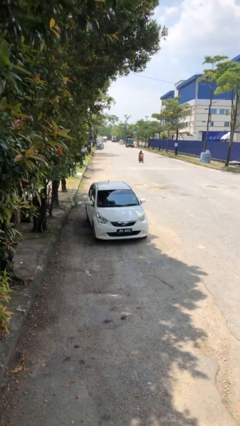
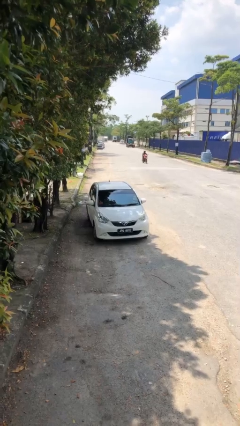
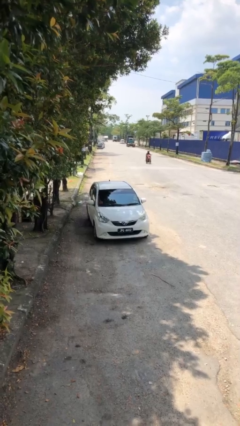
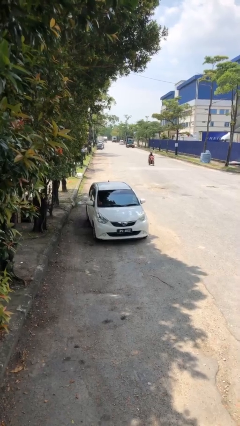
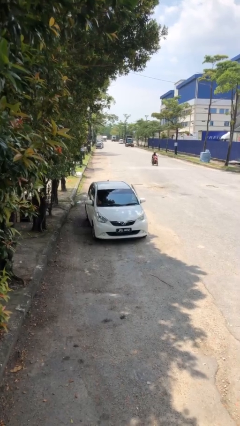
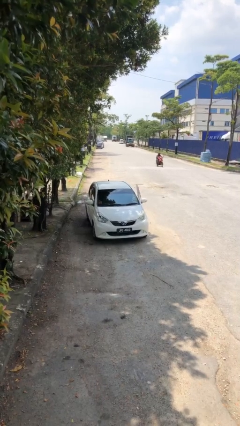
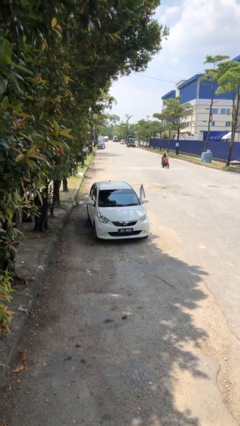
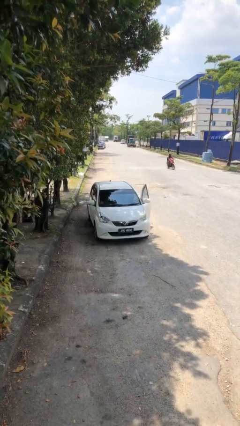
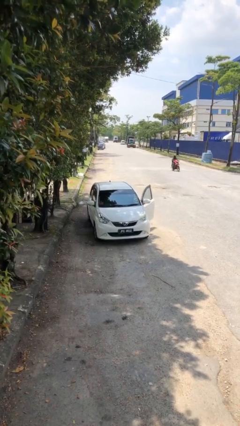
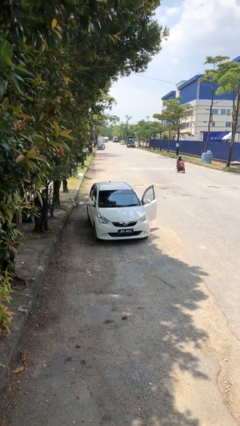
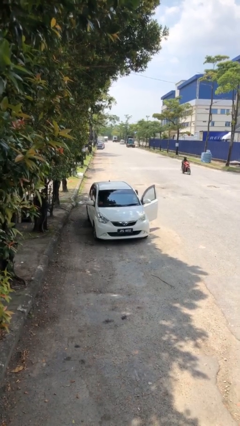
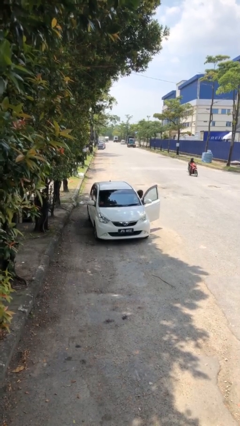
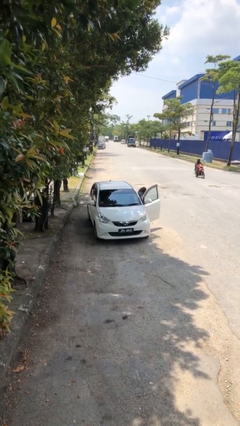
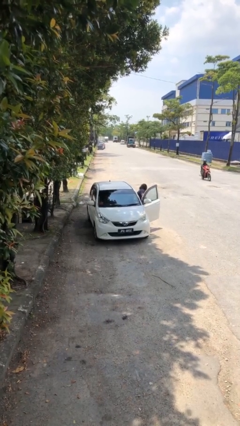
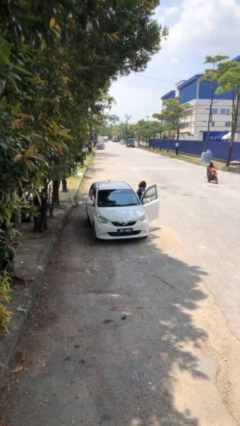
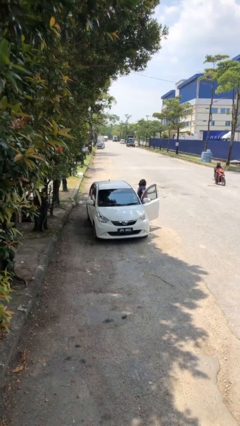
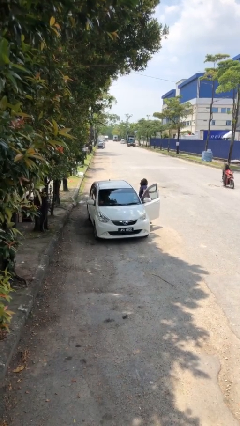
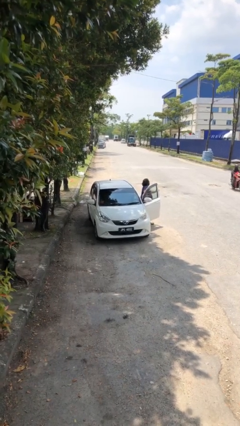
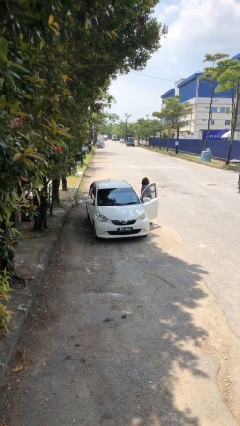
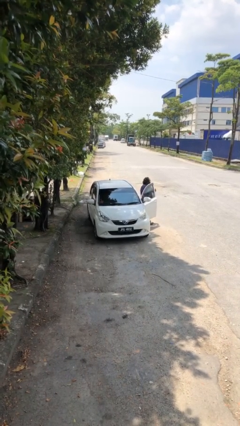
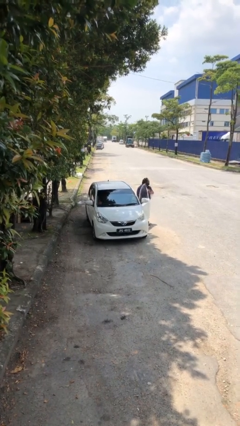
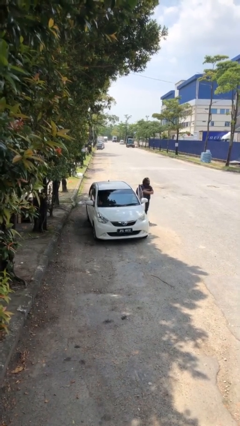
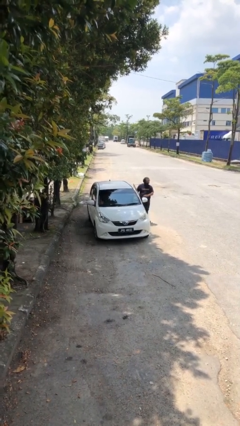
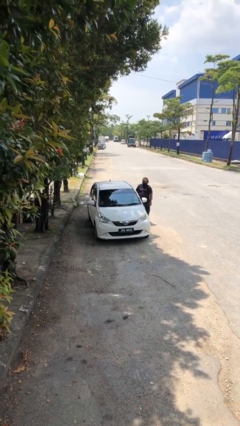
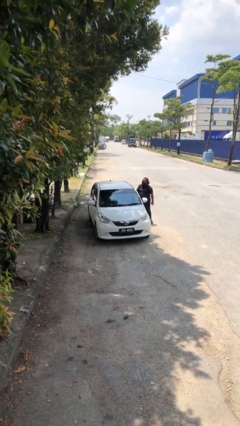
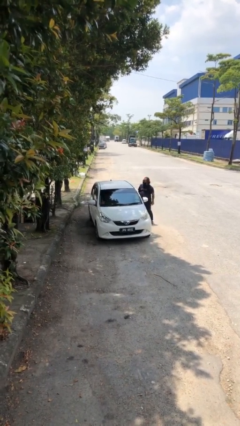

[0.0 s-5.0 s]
car drops off person

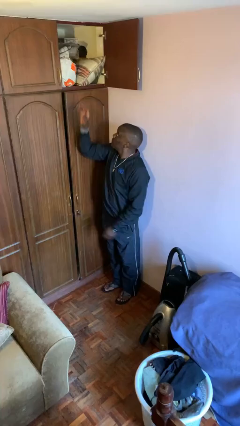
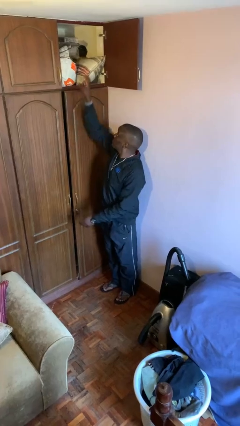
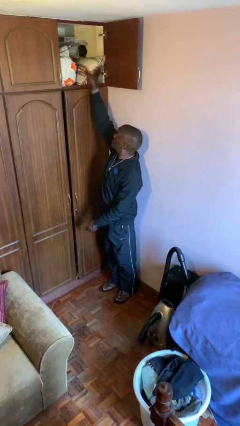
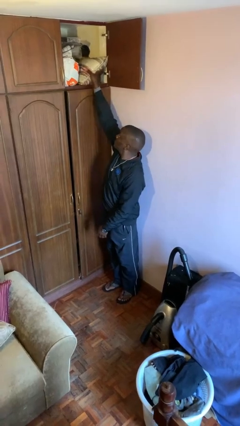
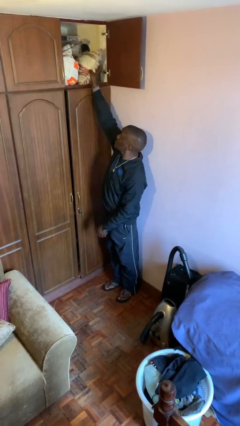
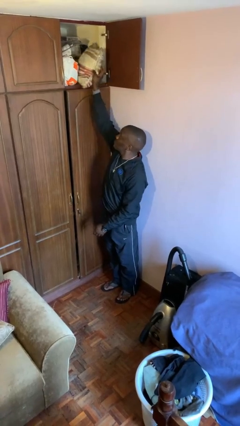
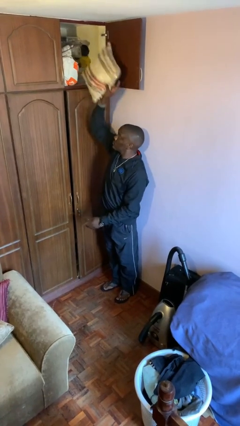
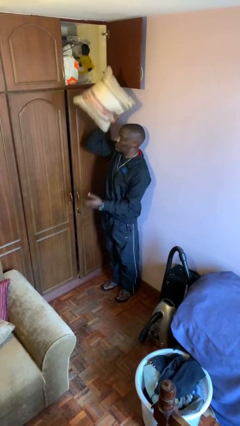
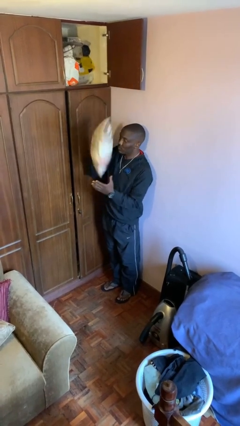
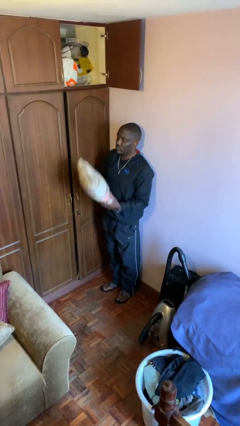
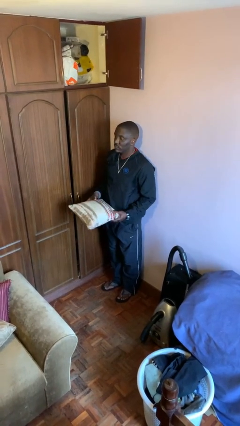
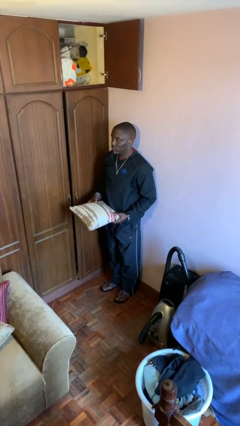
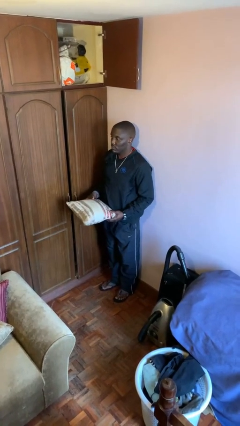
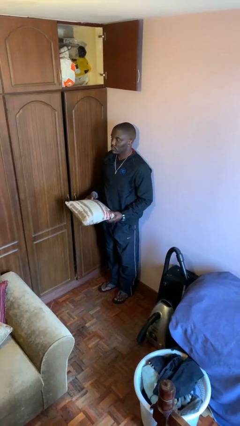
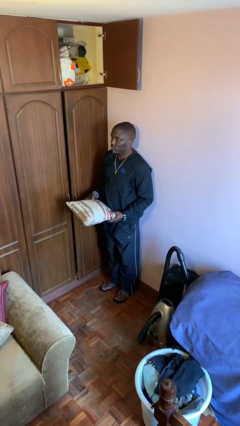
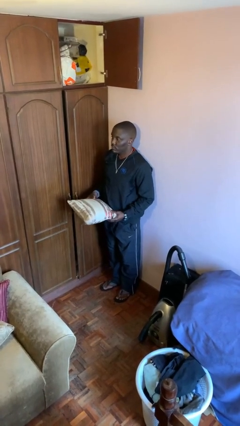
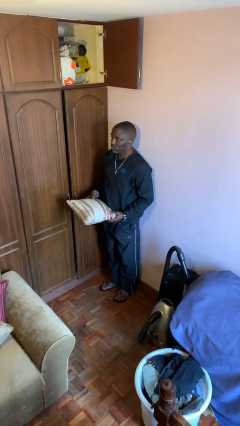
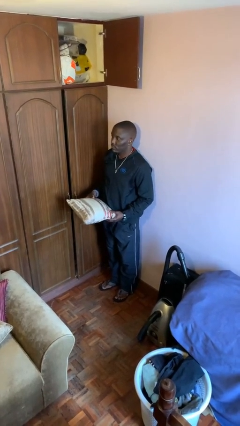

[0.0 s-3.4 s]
person picks up object from shelf

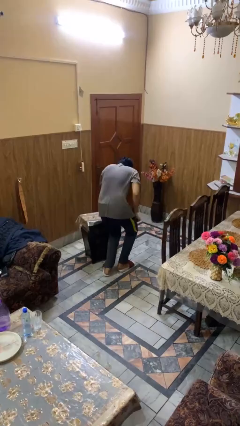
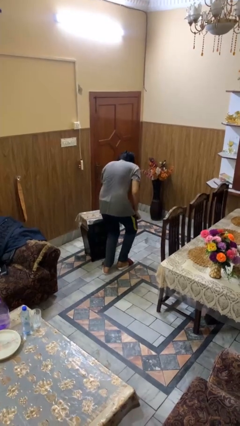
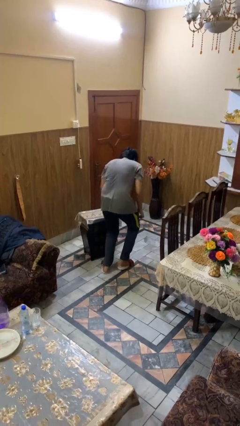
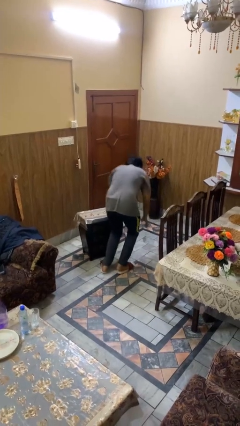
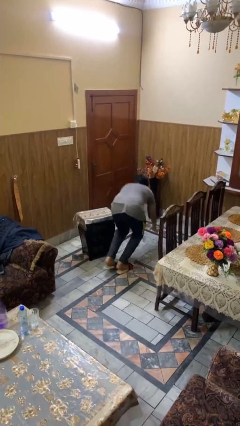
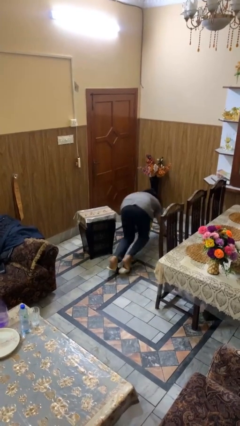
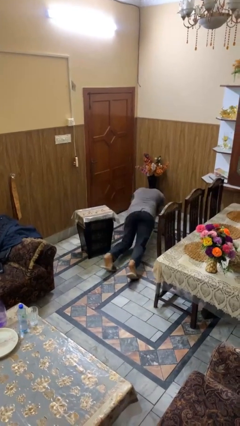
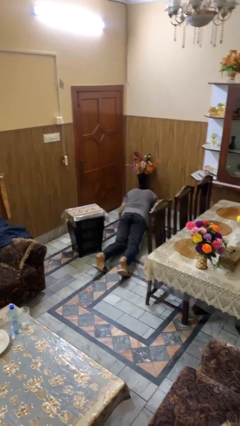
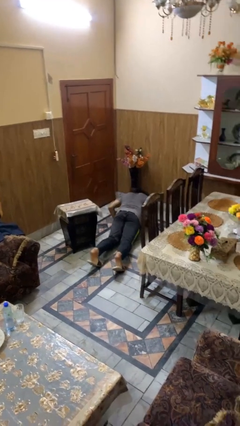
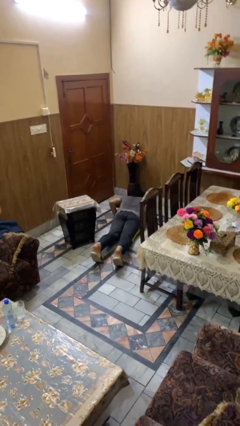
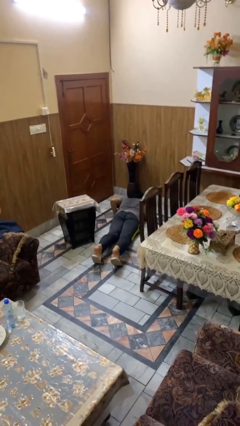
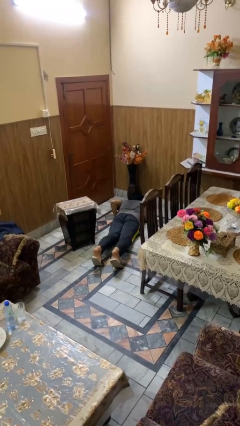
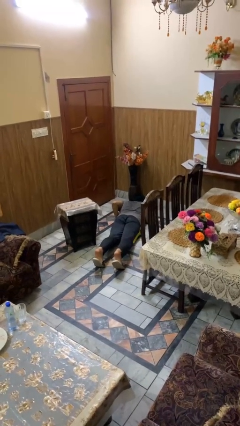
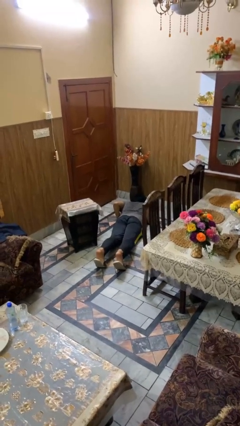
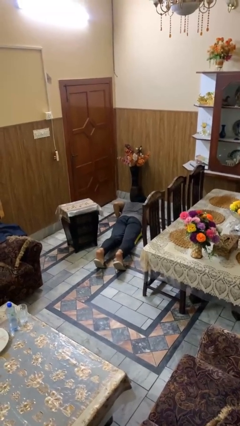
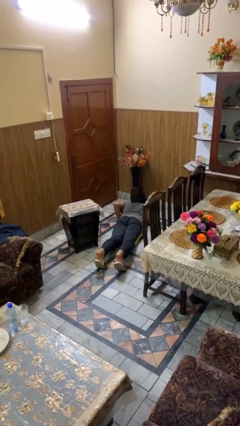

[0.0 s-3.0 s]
person lies down on floor

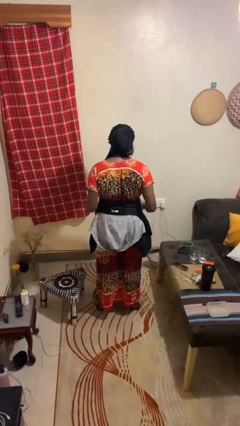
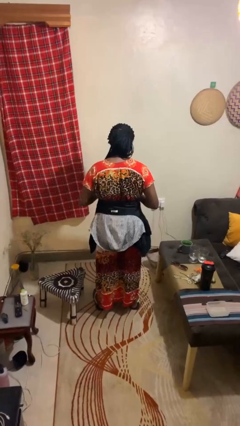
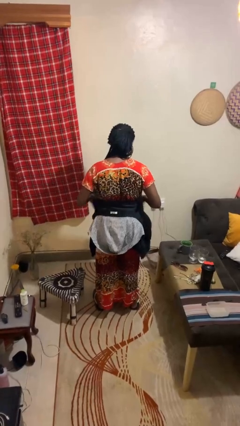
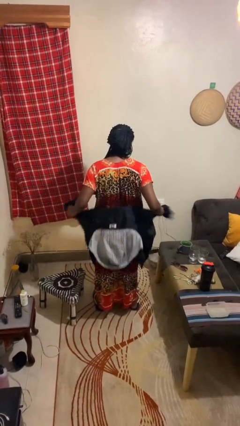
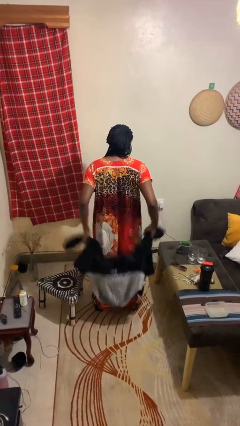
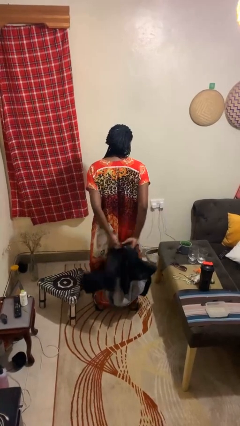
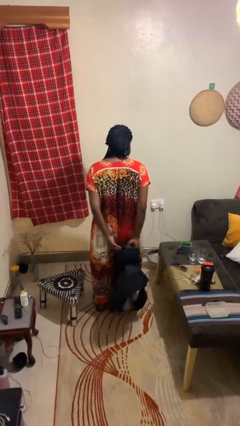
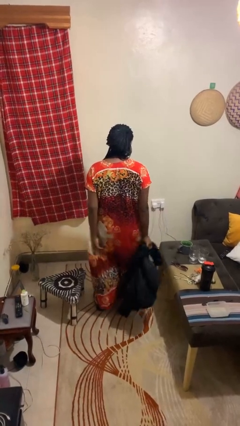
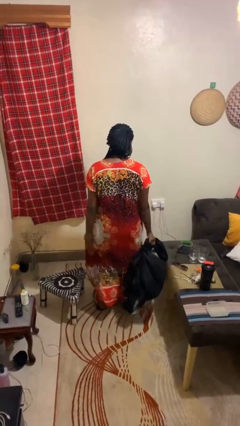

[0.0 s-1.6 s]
person unties jacket around waist

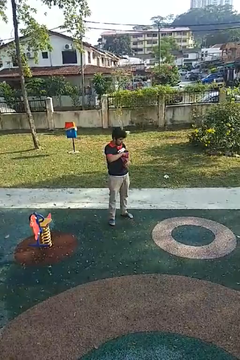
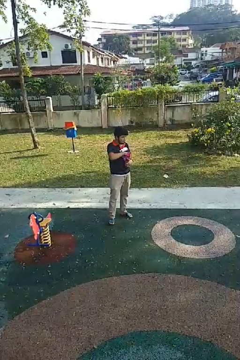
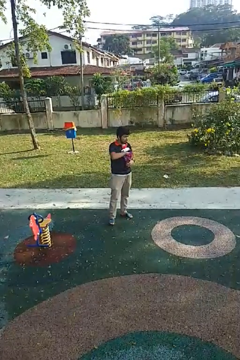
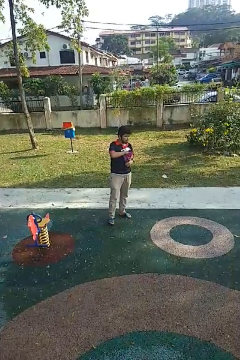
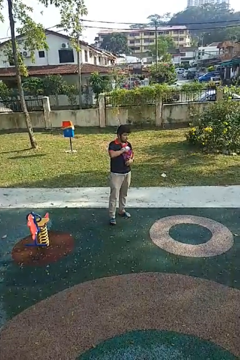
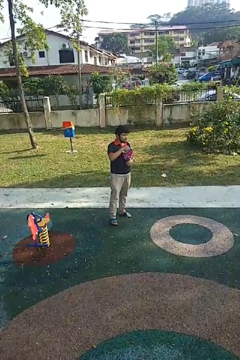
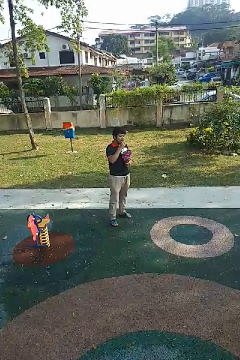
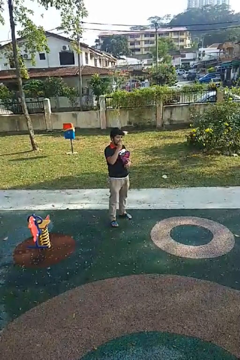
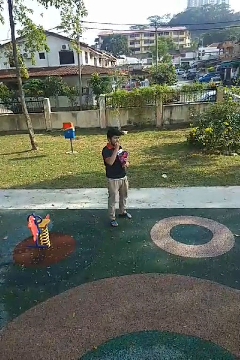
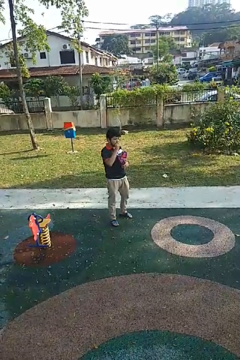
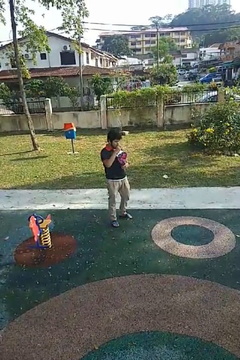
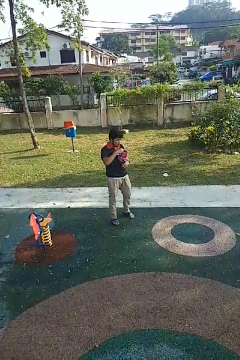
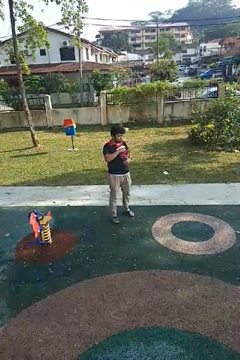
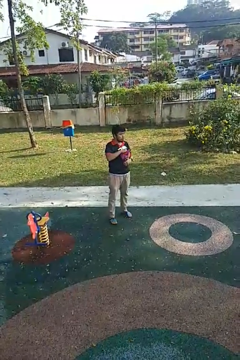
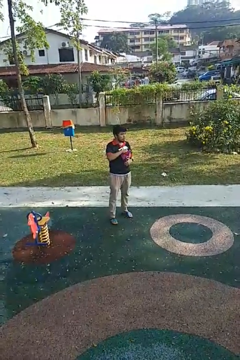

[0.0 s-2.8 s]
person eats snack from bag

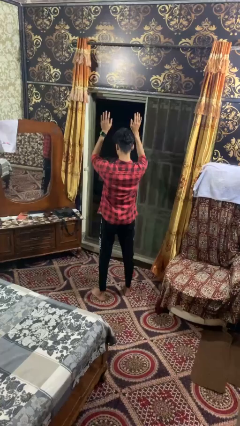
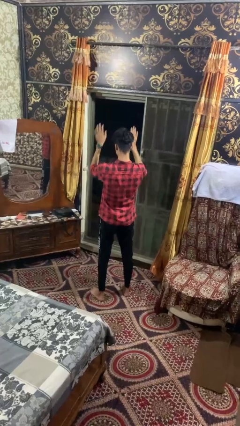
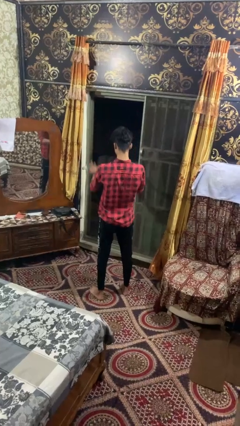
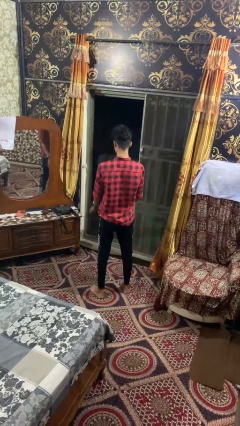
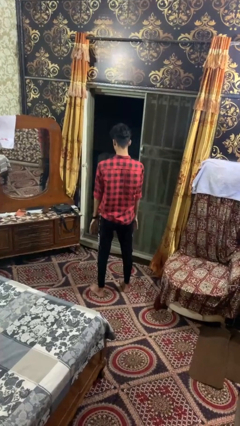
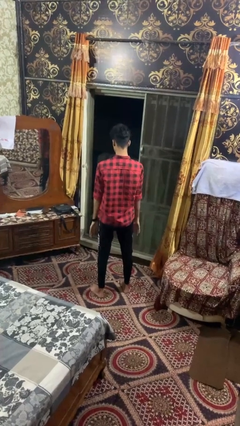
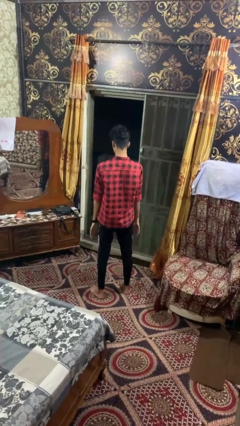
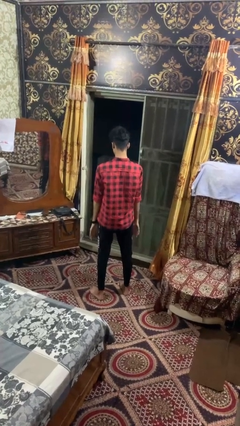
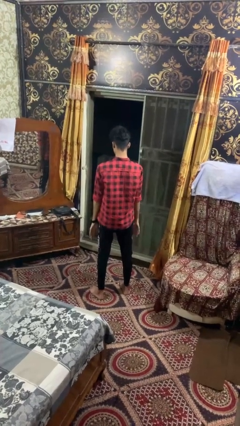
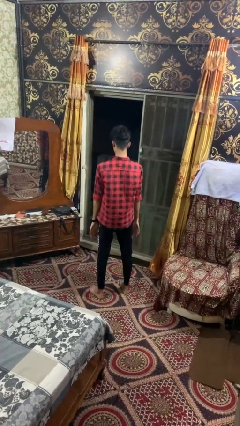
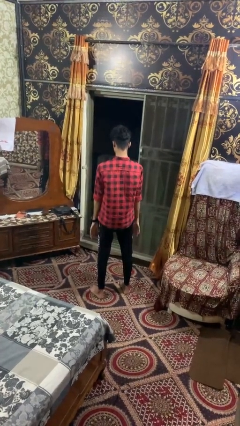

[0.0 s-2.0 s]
person gestures swipe down
